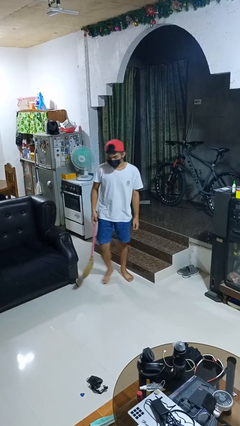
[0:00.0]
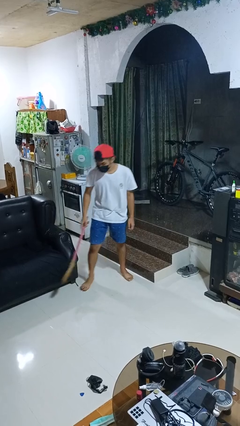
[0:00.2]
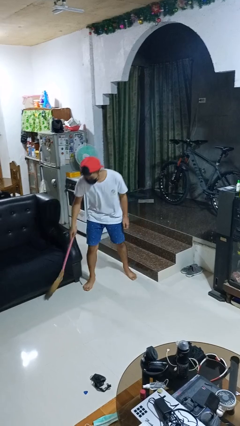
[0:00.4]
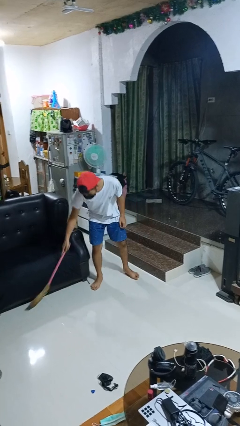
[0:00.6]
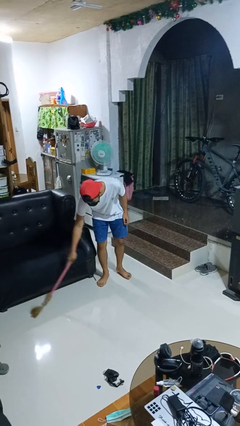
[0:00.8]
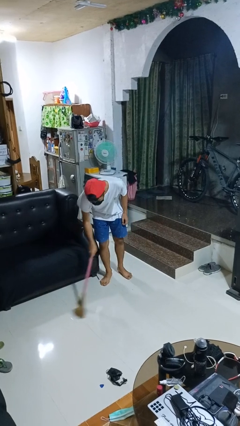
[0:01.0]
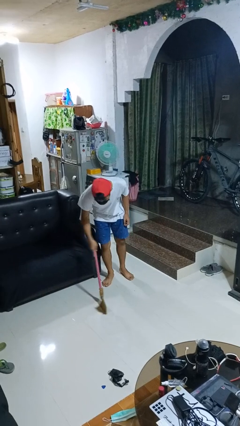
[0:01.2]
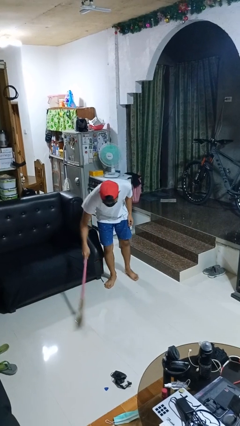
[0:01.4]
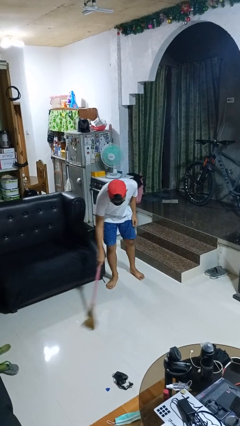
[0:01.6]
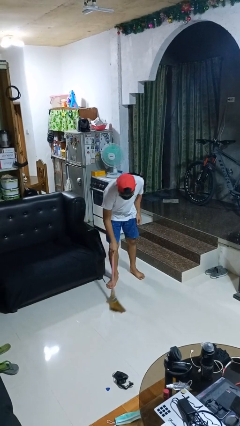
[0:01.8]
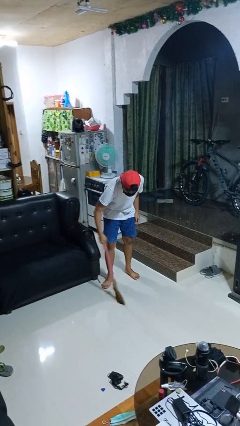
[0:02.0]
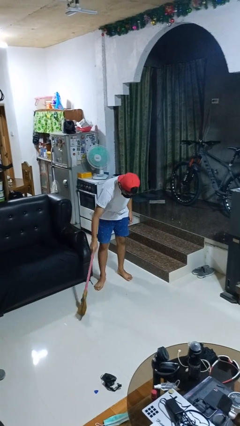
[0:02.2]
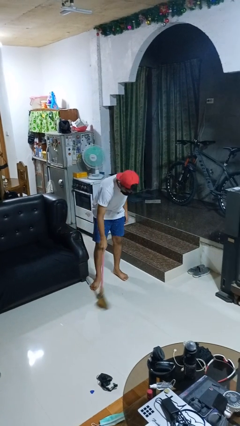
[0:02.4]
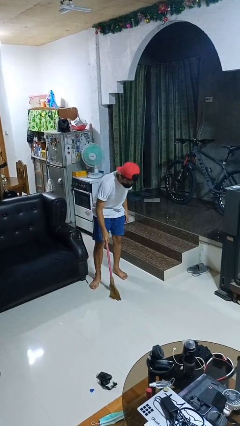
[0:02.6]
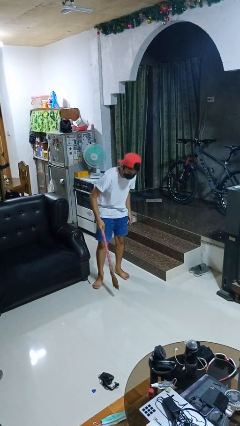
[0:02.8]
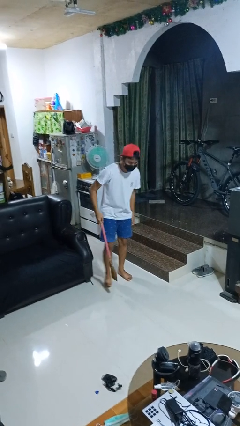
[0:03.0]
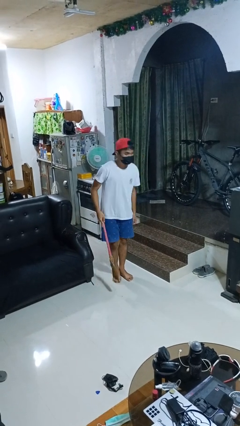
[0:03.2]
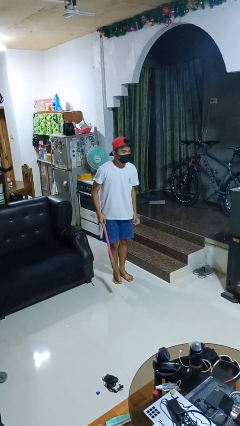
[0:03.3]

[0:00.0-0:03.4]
person sweeps floor

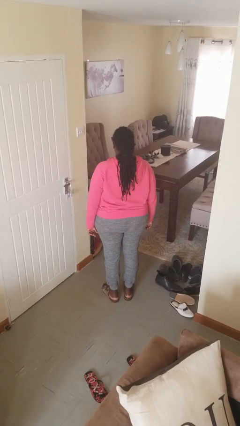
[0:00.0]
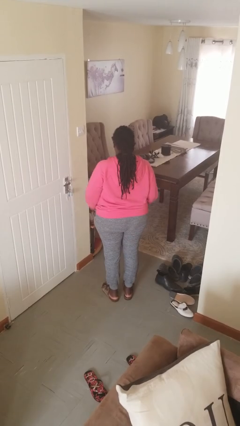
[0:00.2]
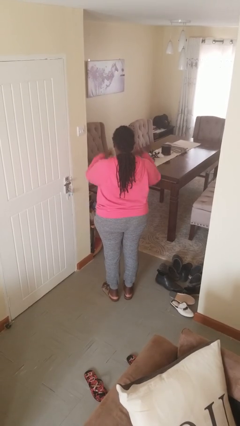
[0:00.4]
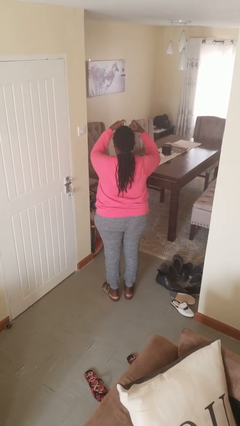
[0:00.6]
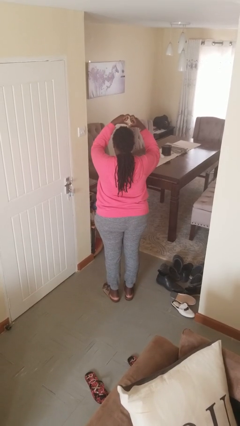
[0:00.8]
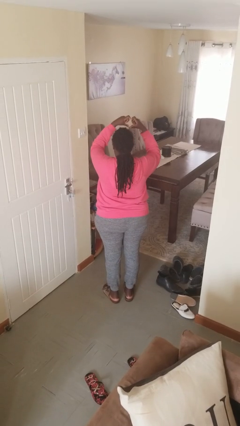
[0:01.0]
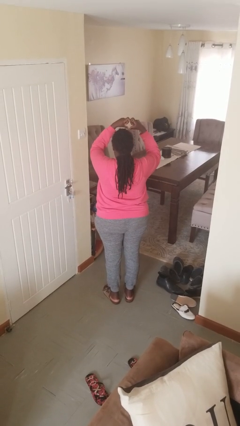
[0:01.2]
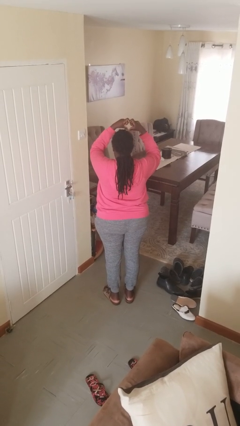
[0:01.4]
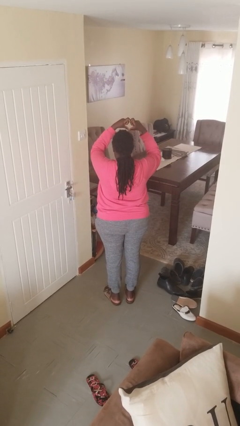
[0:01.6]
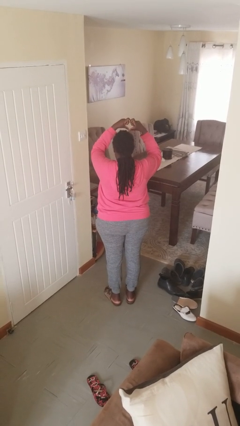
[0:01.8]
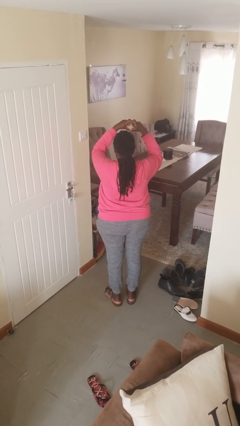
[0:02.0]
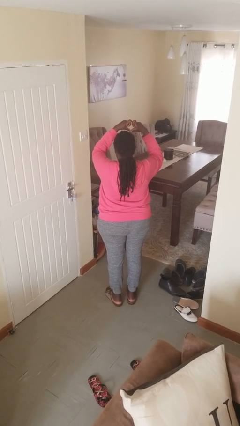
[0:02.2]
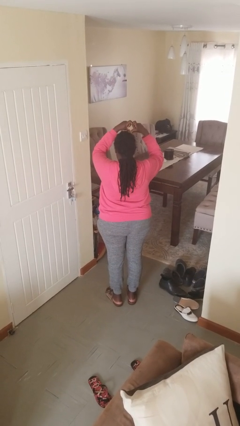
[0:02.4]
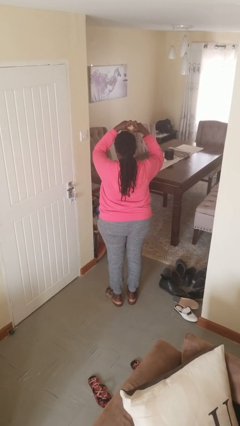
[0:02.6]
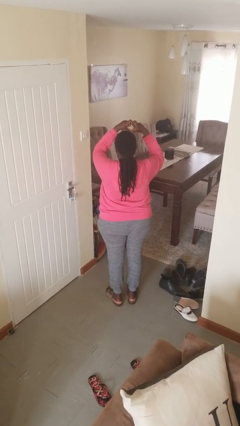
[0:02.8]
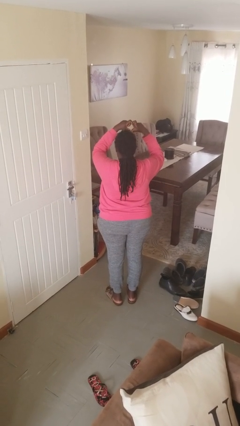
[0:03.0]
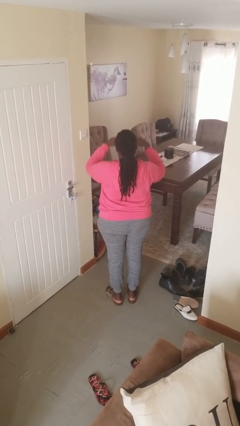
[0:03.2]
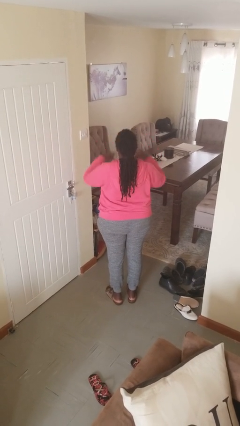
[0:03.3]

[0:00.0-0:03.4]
person gestures heart

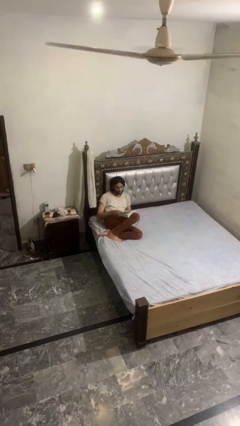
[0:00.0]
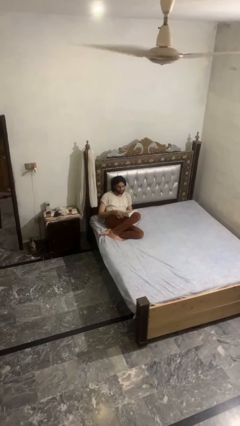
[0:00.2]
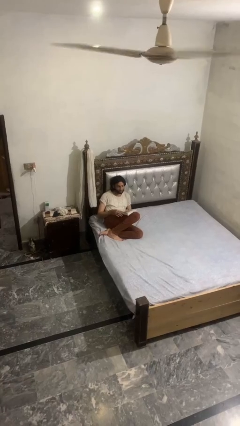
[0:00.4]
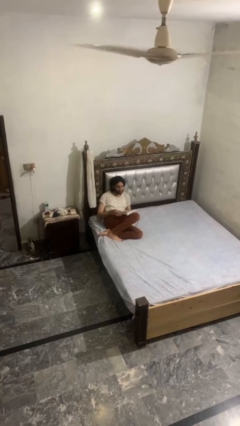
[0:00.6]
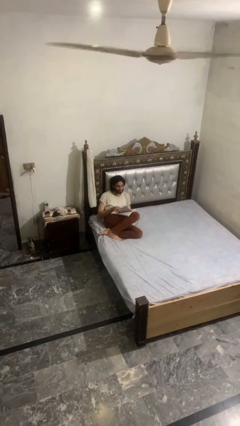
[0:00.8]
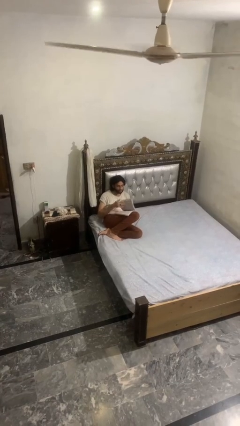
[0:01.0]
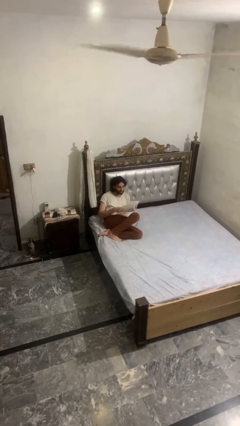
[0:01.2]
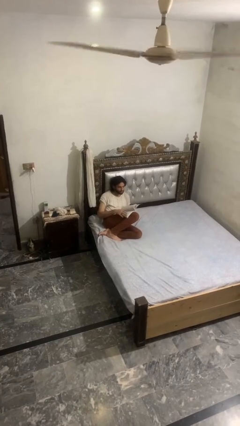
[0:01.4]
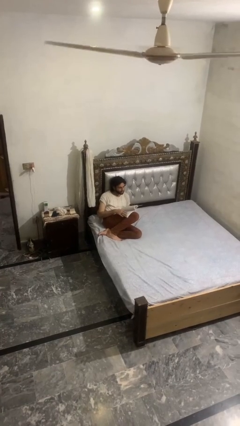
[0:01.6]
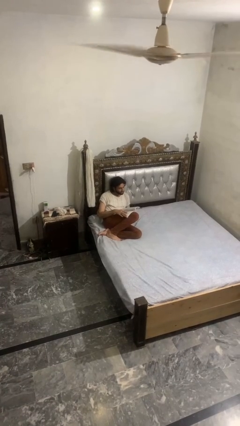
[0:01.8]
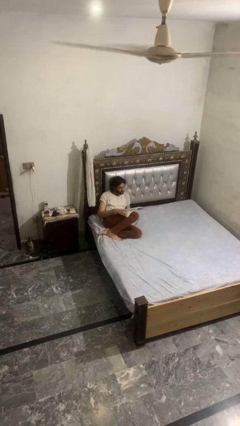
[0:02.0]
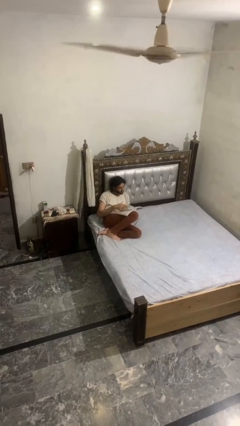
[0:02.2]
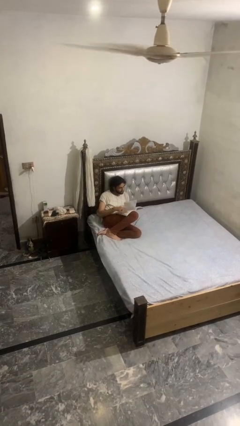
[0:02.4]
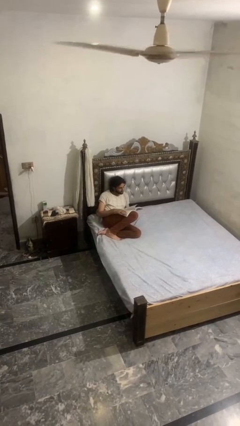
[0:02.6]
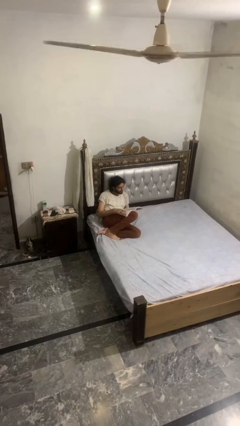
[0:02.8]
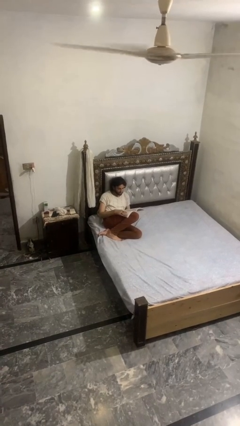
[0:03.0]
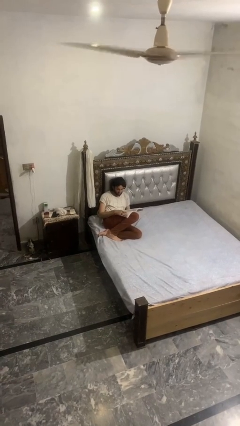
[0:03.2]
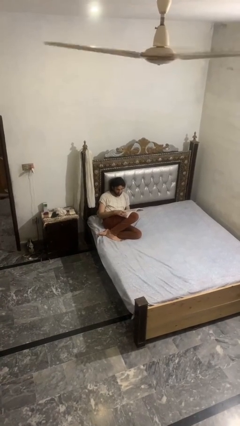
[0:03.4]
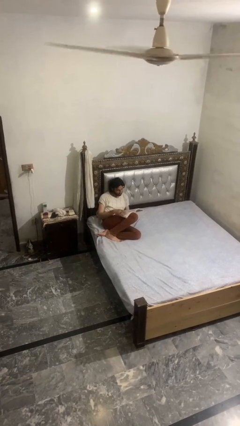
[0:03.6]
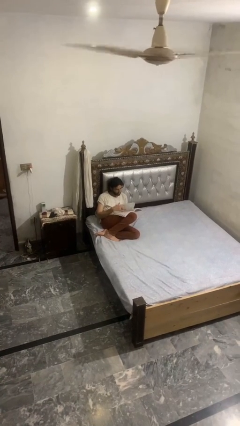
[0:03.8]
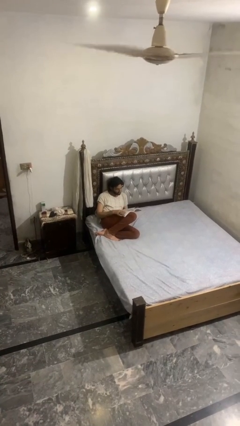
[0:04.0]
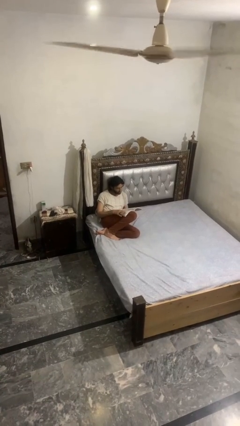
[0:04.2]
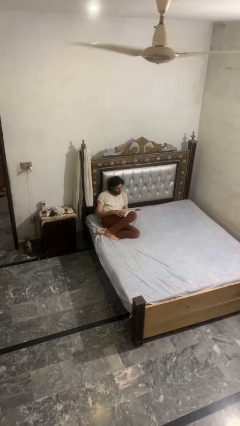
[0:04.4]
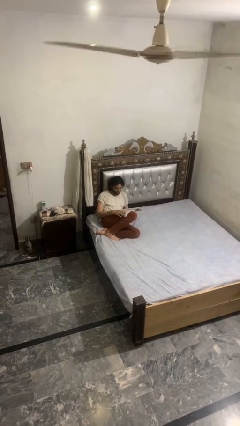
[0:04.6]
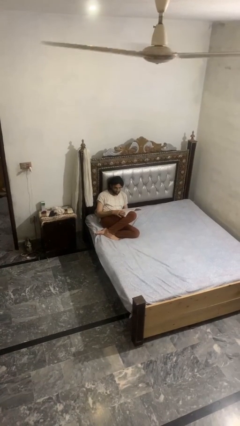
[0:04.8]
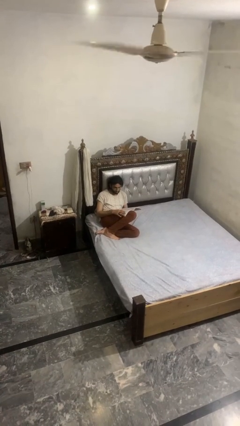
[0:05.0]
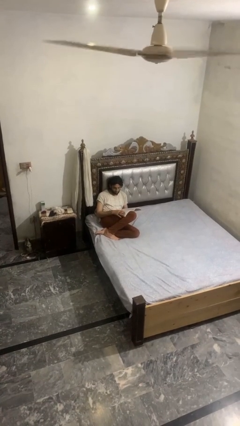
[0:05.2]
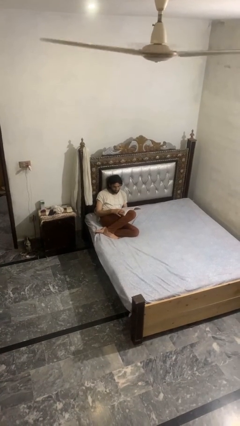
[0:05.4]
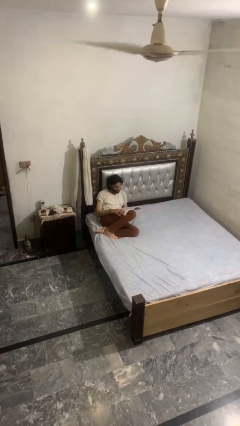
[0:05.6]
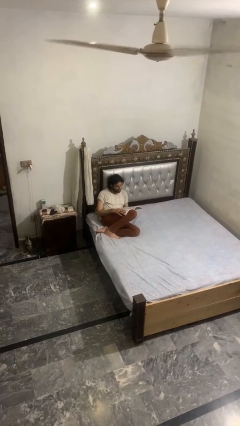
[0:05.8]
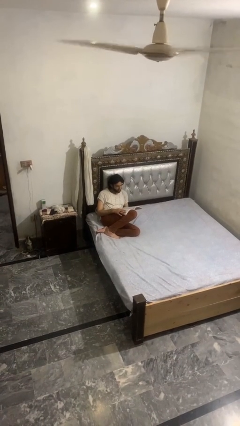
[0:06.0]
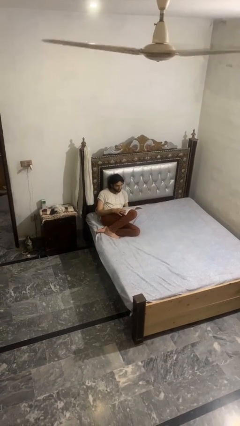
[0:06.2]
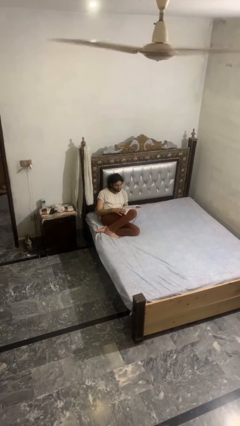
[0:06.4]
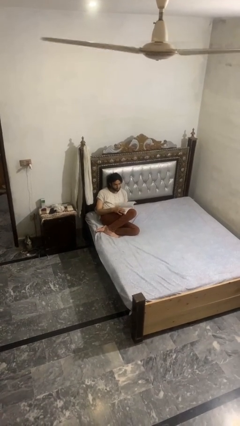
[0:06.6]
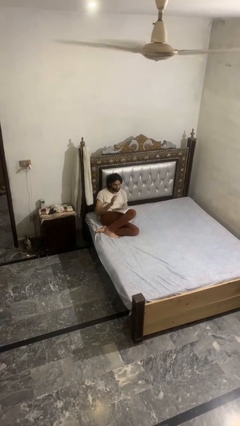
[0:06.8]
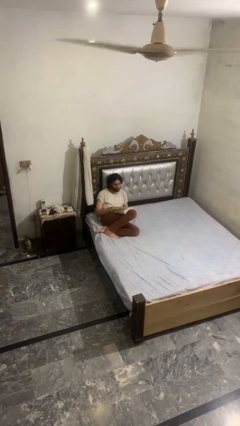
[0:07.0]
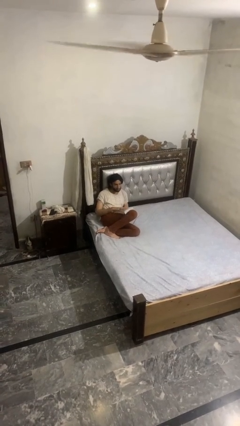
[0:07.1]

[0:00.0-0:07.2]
person reads book

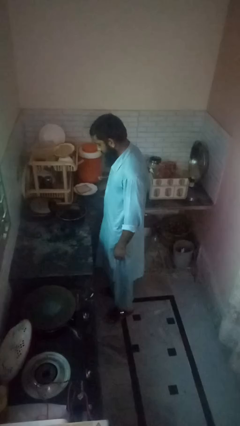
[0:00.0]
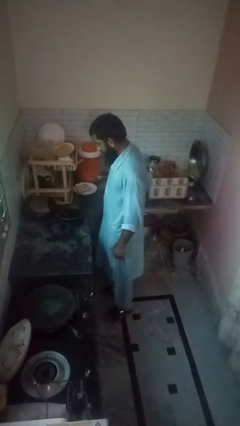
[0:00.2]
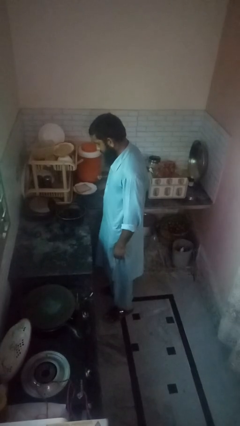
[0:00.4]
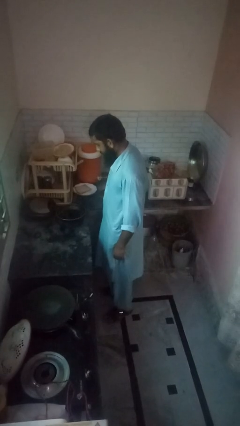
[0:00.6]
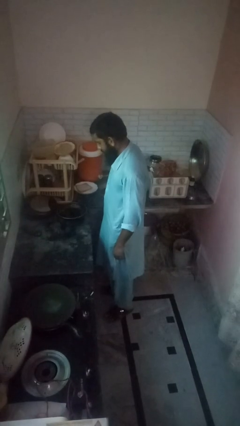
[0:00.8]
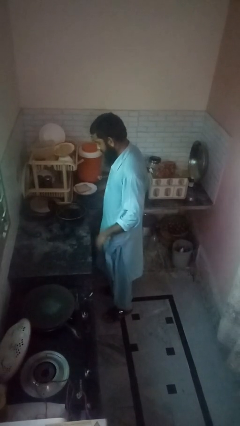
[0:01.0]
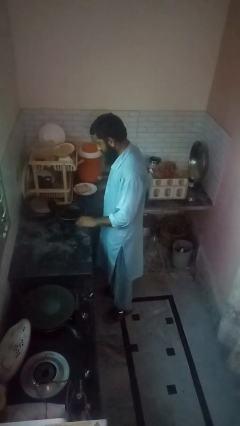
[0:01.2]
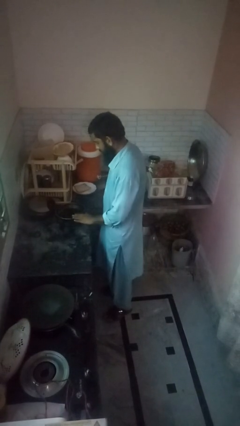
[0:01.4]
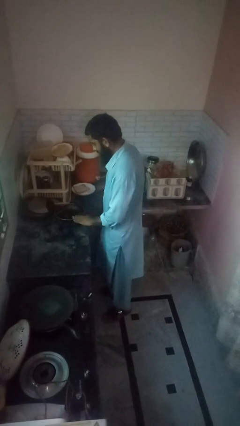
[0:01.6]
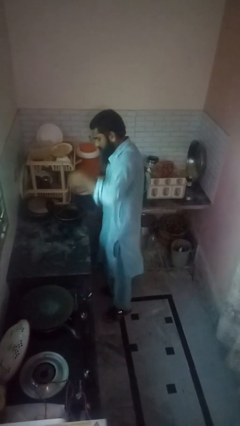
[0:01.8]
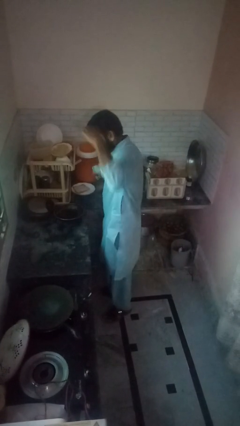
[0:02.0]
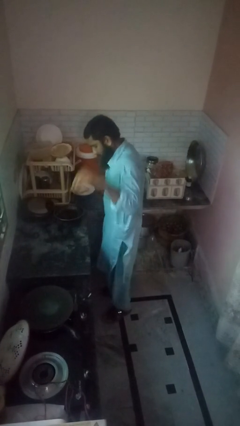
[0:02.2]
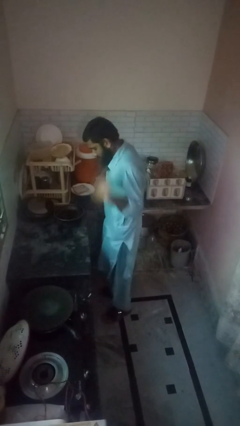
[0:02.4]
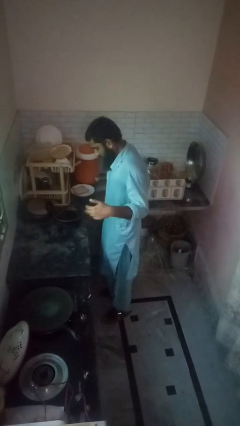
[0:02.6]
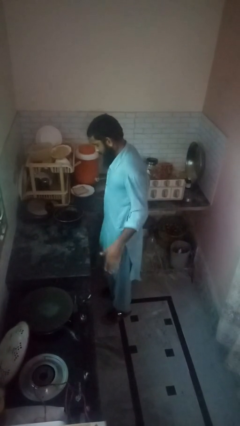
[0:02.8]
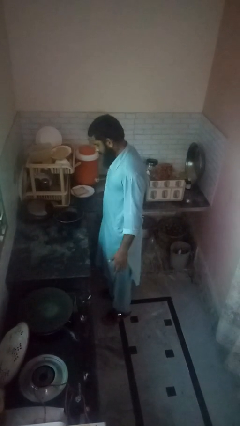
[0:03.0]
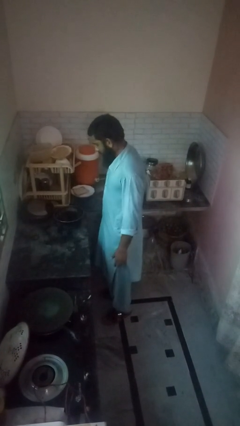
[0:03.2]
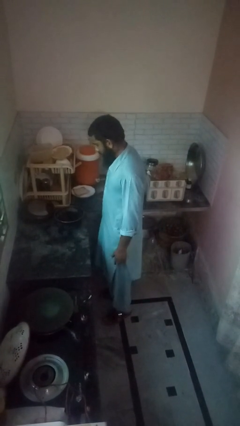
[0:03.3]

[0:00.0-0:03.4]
person burns hand

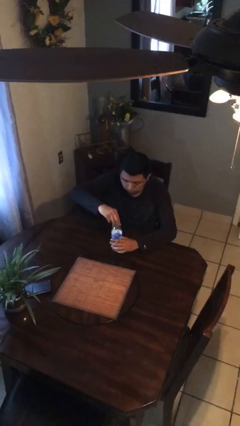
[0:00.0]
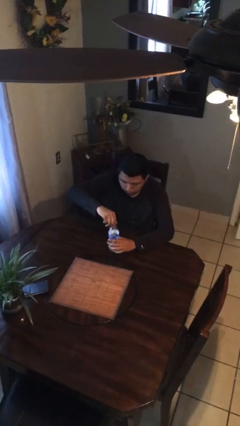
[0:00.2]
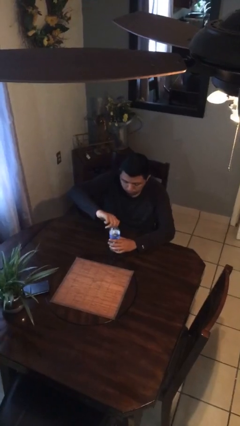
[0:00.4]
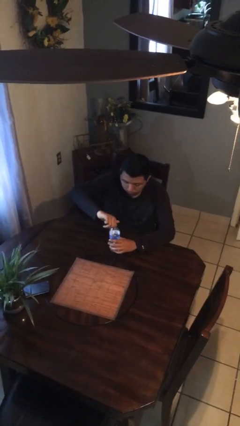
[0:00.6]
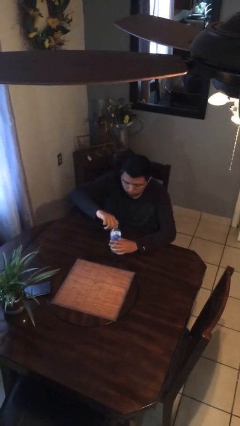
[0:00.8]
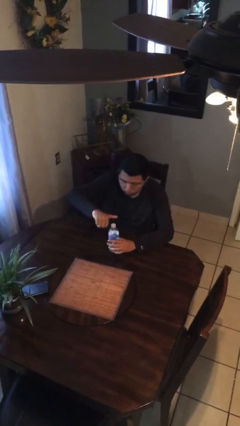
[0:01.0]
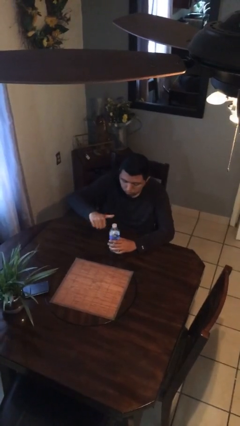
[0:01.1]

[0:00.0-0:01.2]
person screws lid to bottle
